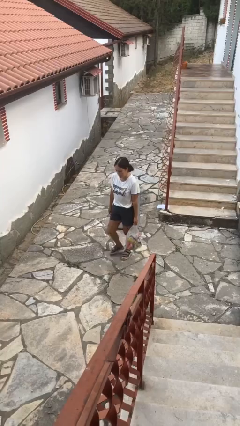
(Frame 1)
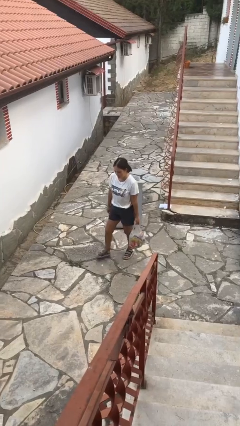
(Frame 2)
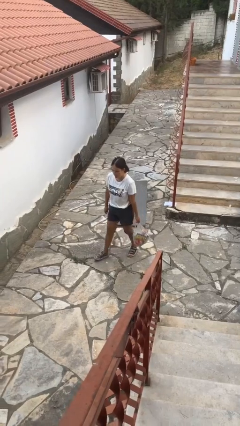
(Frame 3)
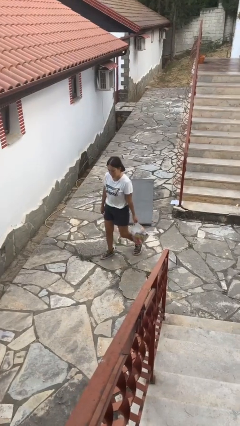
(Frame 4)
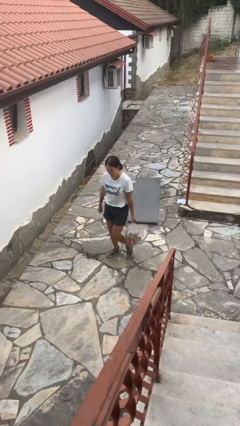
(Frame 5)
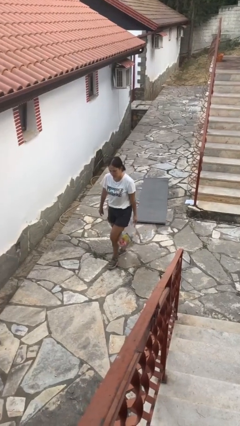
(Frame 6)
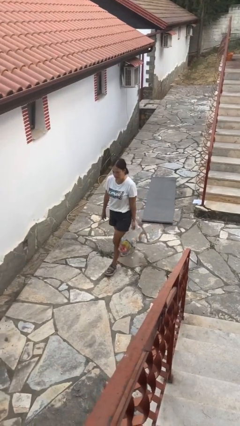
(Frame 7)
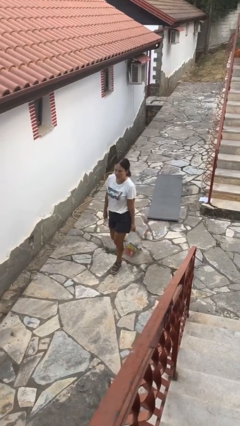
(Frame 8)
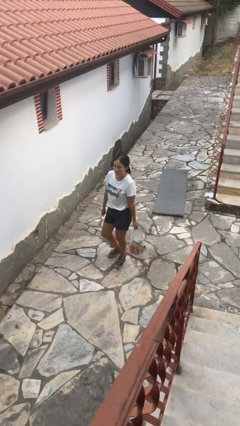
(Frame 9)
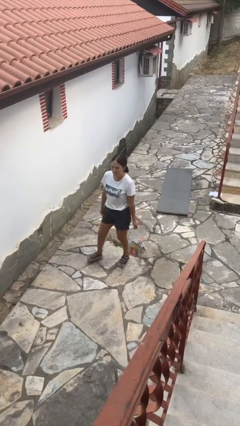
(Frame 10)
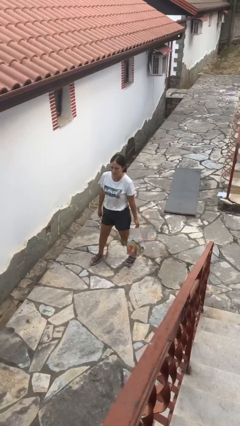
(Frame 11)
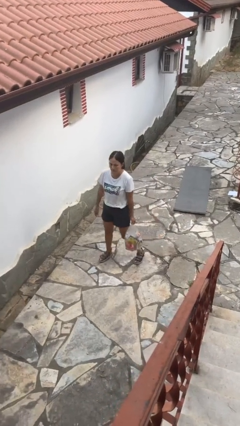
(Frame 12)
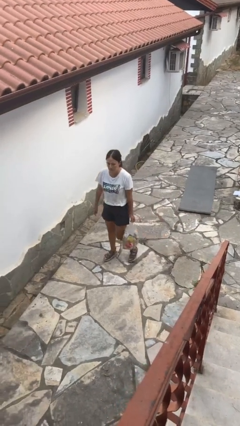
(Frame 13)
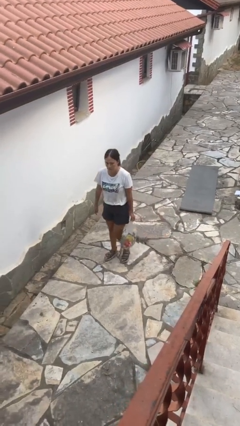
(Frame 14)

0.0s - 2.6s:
person carries groceries

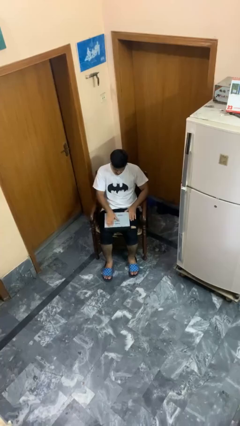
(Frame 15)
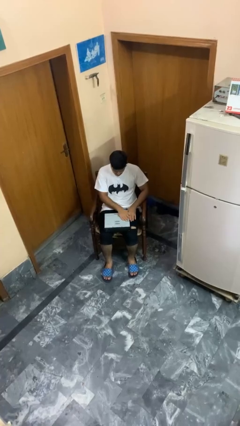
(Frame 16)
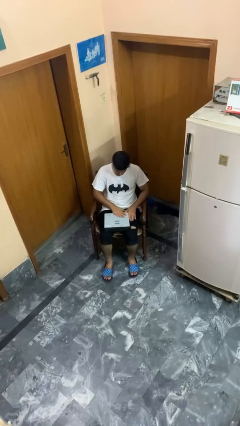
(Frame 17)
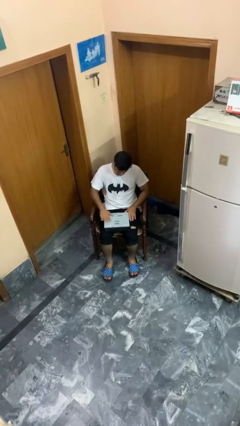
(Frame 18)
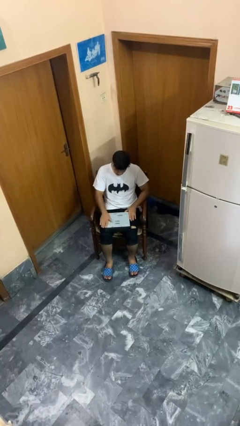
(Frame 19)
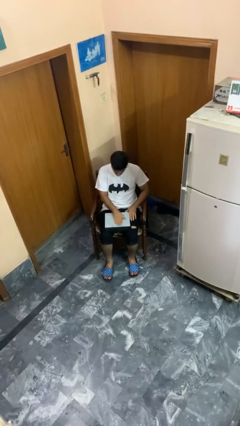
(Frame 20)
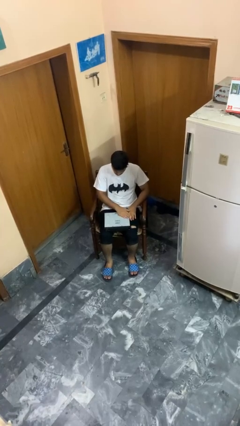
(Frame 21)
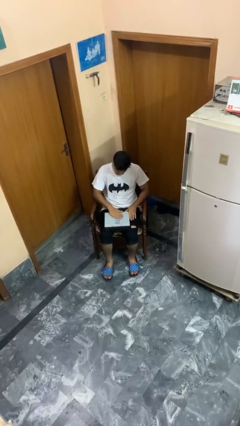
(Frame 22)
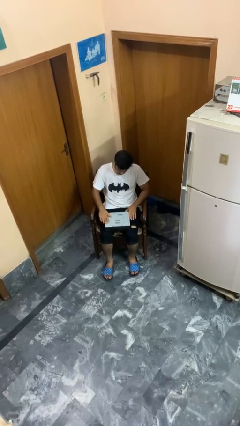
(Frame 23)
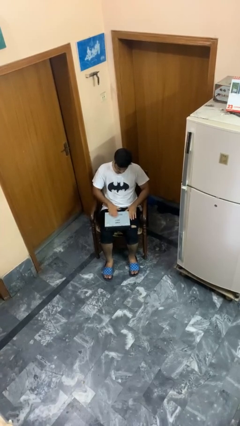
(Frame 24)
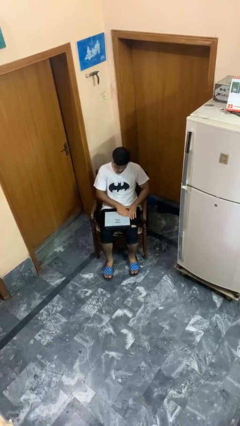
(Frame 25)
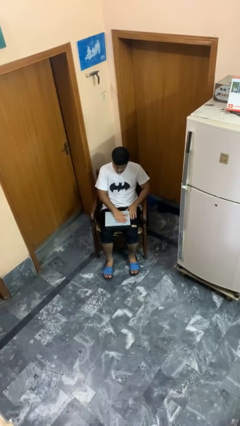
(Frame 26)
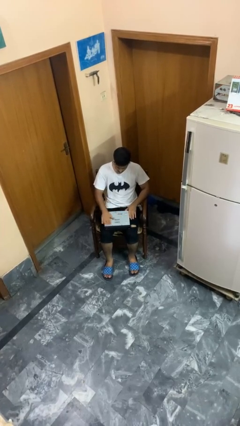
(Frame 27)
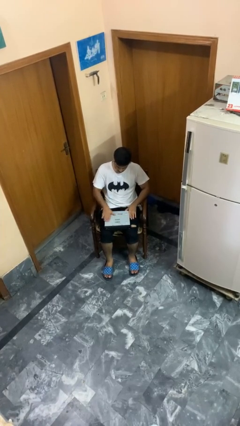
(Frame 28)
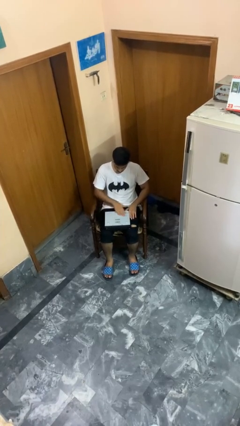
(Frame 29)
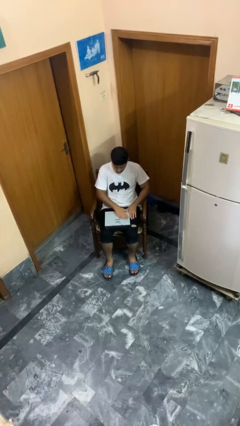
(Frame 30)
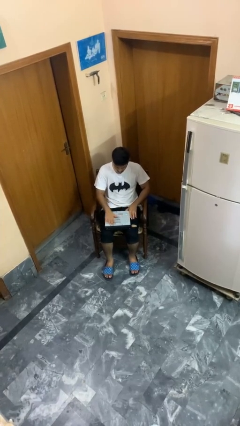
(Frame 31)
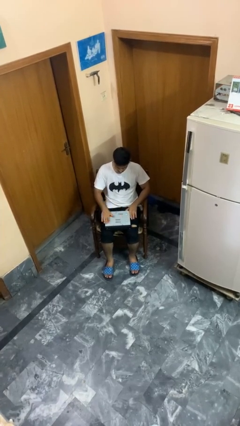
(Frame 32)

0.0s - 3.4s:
person waves hand over object

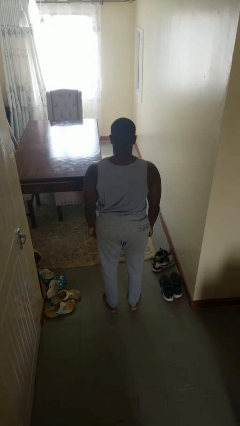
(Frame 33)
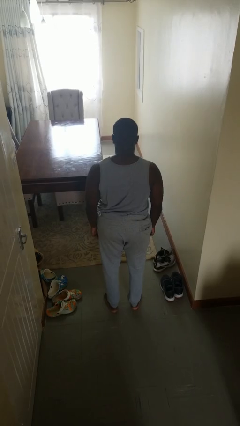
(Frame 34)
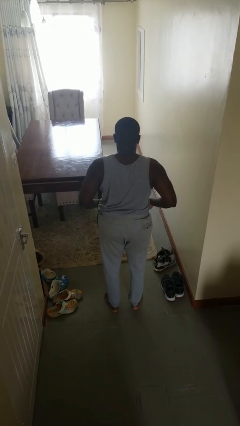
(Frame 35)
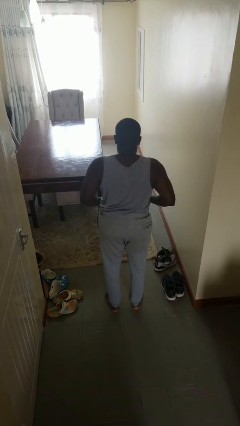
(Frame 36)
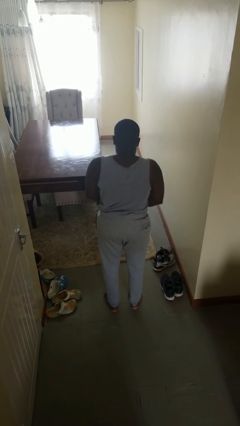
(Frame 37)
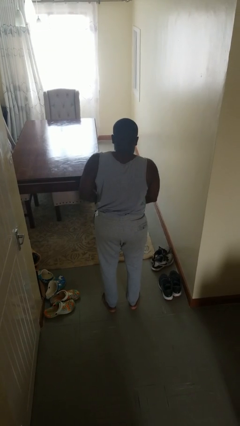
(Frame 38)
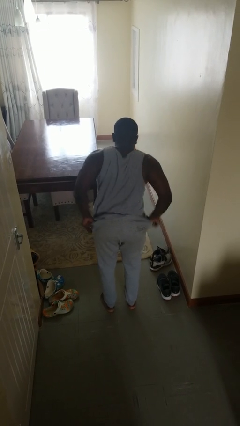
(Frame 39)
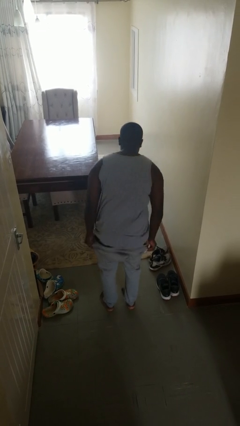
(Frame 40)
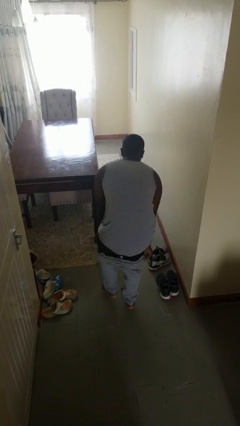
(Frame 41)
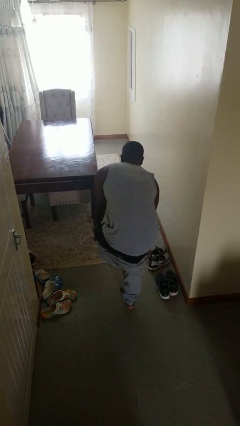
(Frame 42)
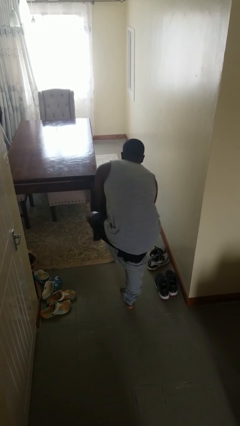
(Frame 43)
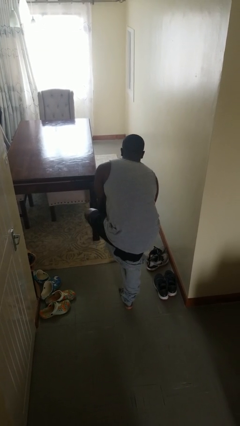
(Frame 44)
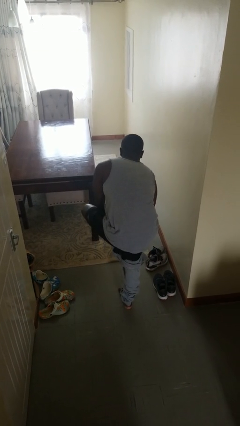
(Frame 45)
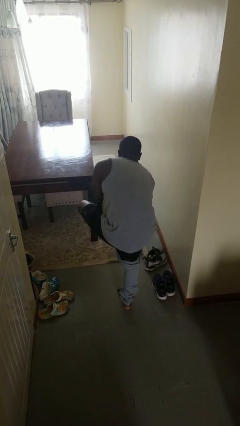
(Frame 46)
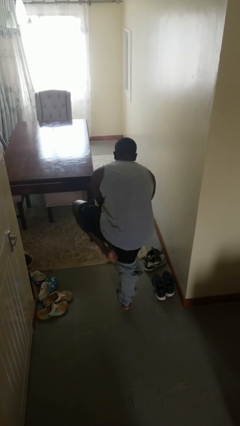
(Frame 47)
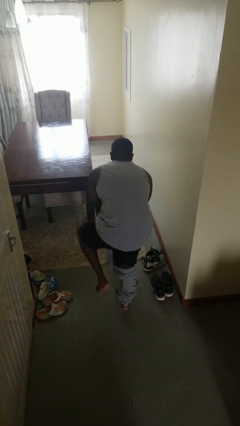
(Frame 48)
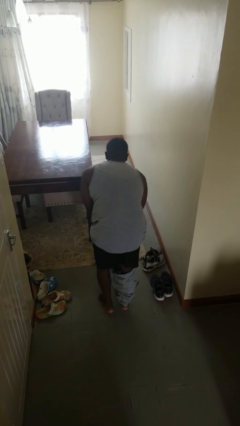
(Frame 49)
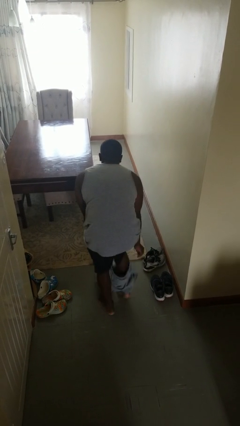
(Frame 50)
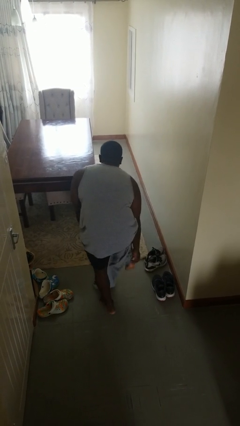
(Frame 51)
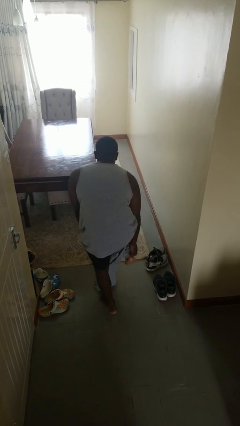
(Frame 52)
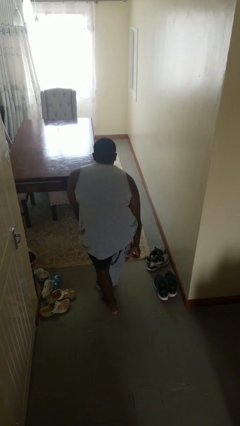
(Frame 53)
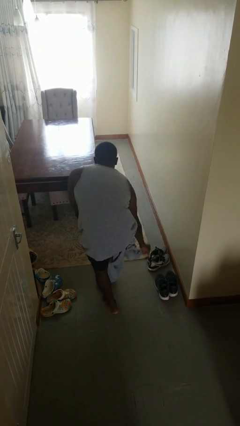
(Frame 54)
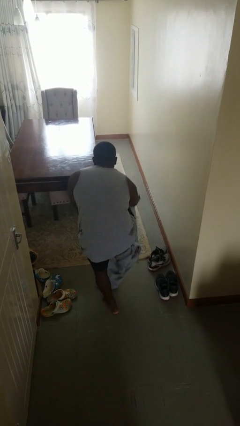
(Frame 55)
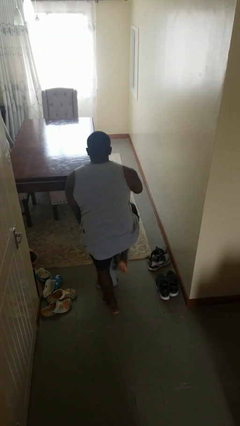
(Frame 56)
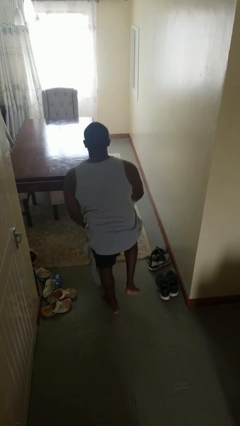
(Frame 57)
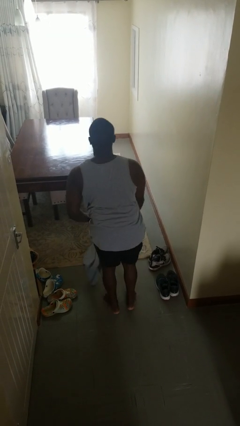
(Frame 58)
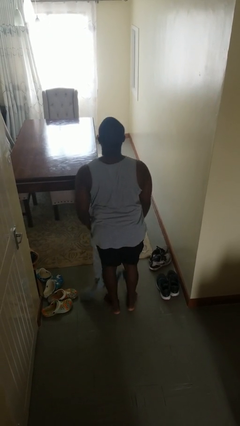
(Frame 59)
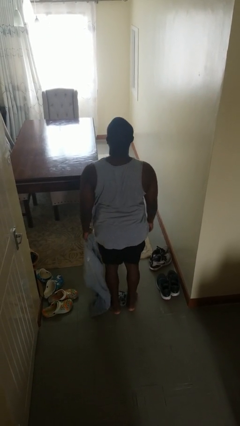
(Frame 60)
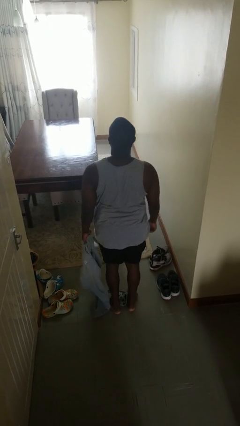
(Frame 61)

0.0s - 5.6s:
person takes off pants

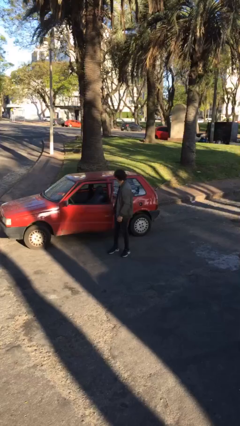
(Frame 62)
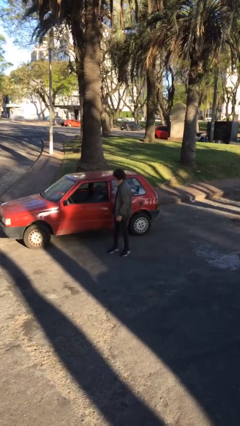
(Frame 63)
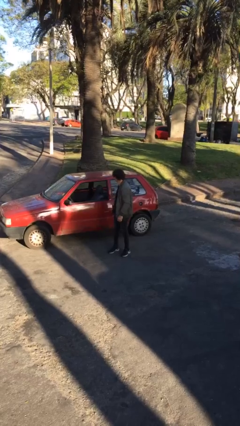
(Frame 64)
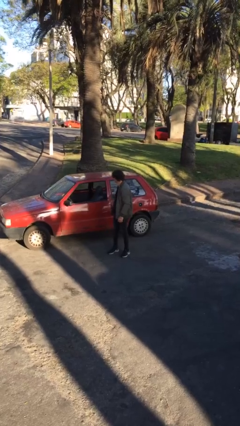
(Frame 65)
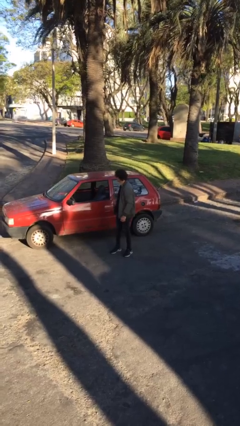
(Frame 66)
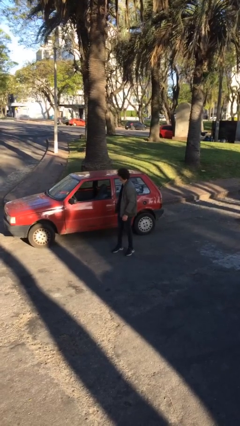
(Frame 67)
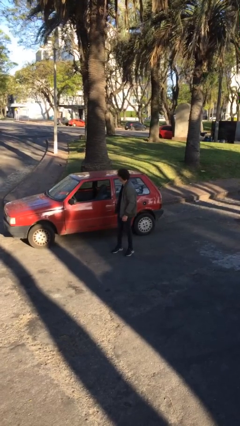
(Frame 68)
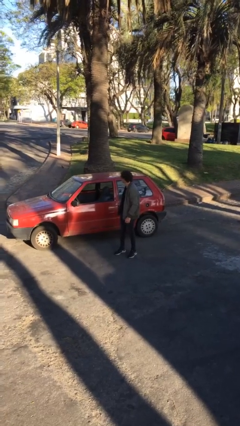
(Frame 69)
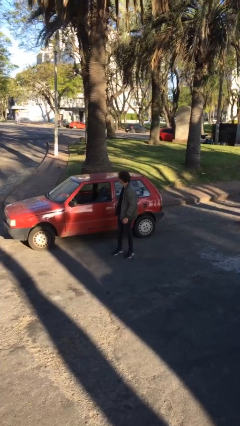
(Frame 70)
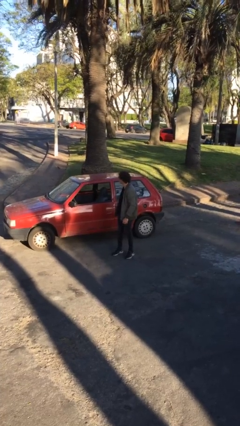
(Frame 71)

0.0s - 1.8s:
person closes car door

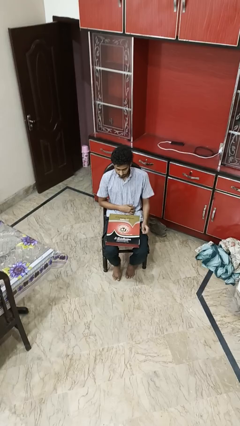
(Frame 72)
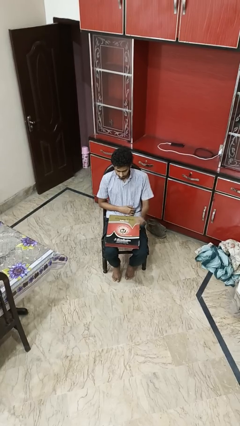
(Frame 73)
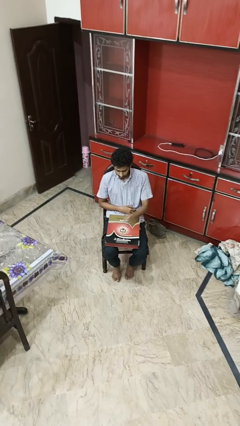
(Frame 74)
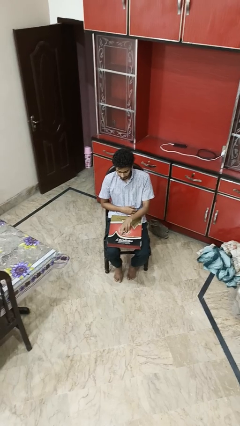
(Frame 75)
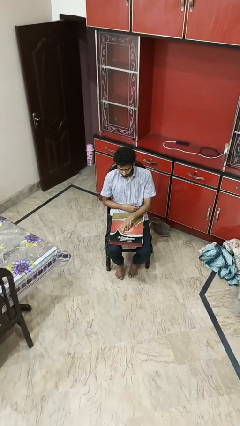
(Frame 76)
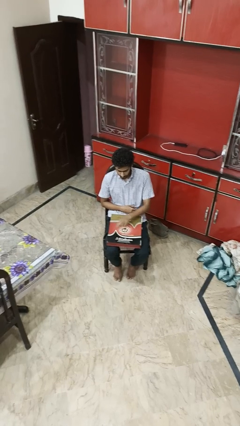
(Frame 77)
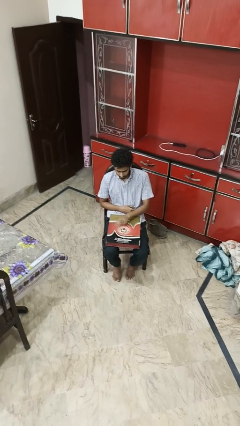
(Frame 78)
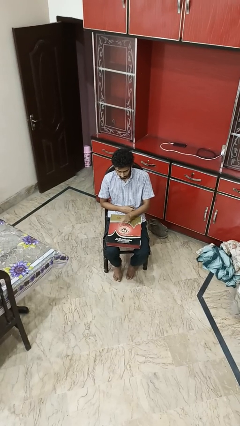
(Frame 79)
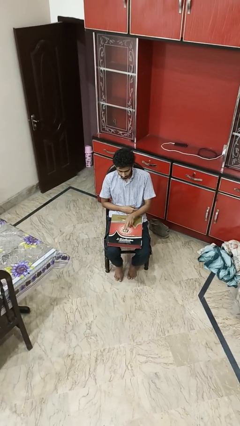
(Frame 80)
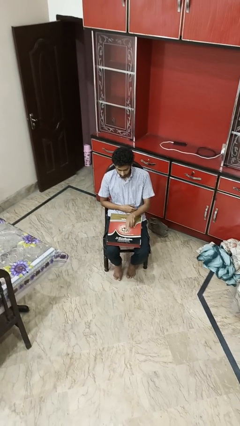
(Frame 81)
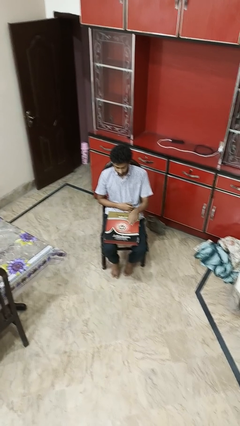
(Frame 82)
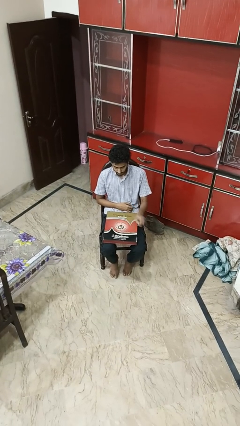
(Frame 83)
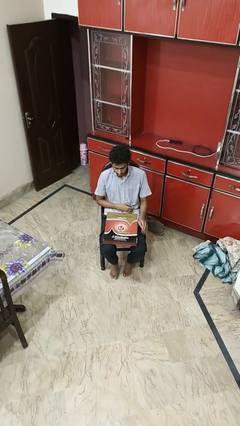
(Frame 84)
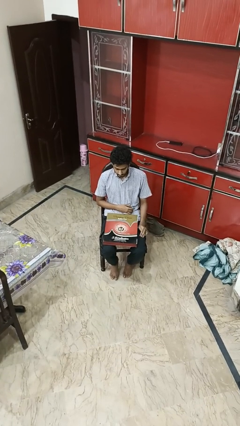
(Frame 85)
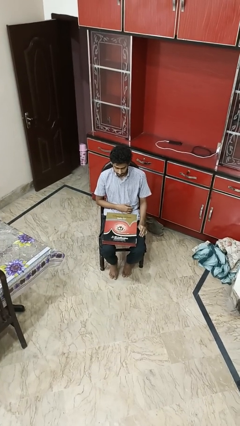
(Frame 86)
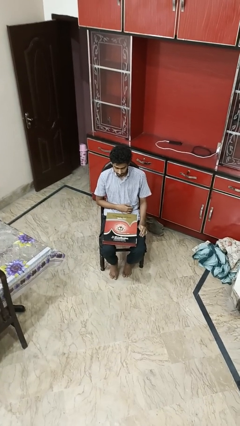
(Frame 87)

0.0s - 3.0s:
person taps object with finger

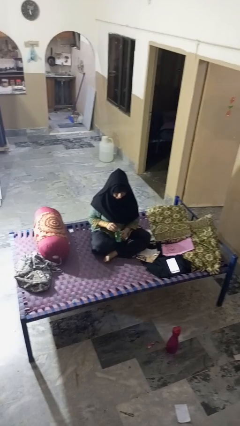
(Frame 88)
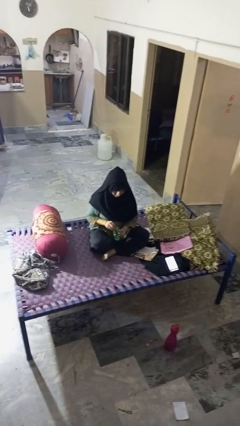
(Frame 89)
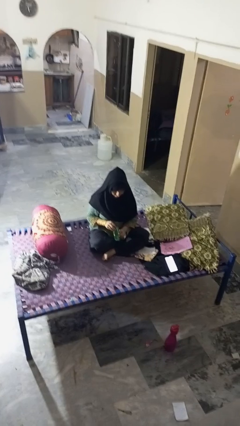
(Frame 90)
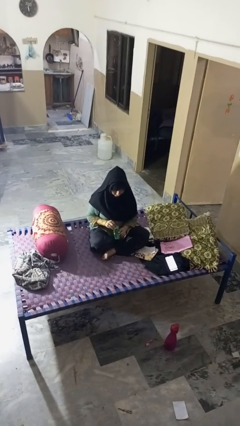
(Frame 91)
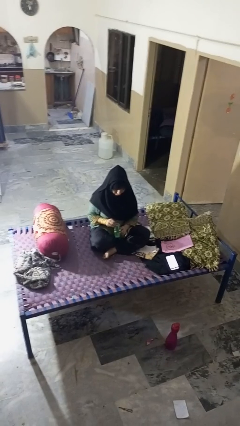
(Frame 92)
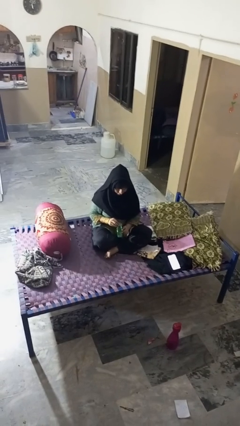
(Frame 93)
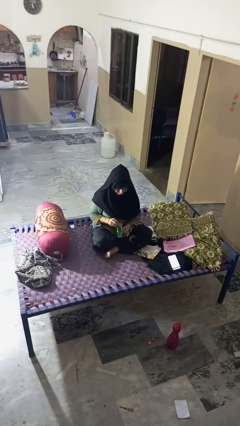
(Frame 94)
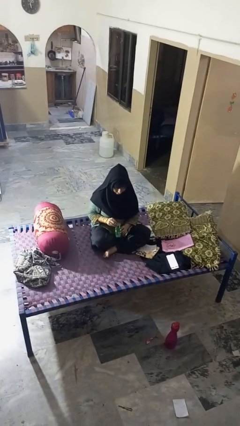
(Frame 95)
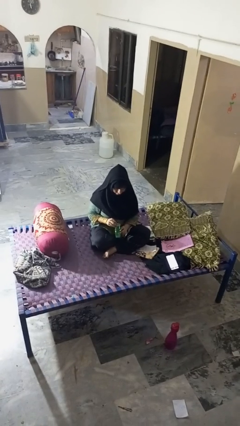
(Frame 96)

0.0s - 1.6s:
person opens can with can opener
